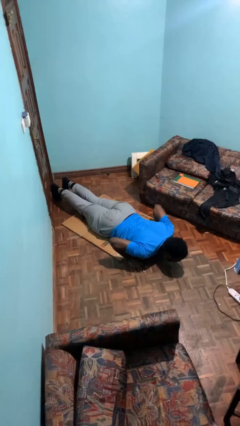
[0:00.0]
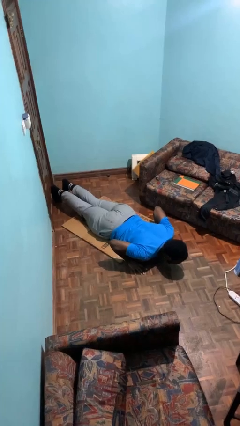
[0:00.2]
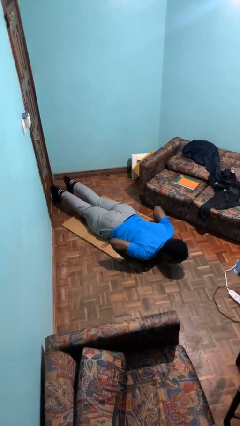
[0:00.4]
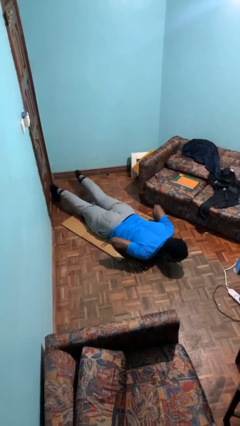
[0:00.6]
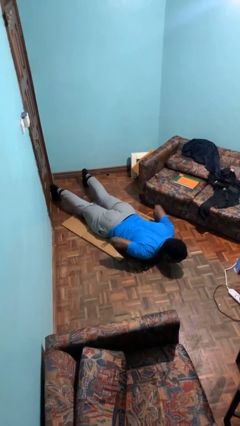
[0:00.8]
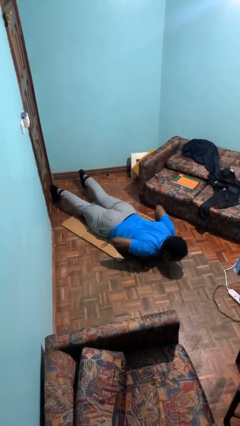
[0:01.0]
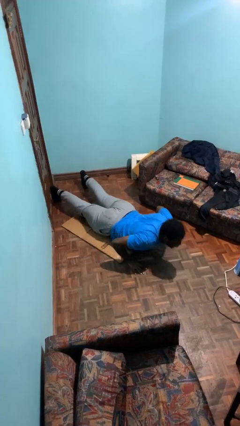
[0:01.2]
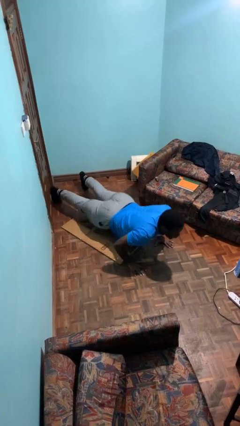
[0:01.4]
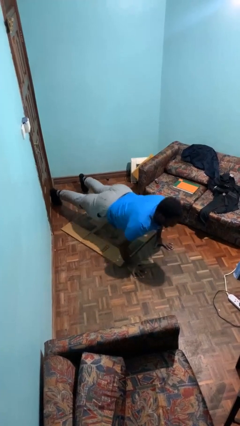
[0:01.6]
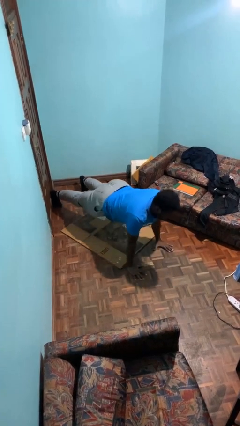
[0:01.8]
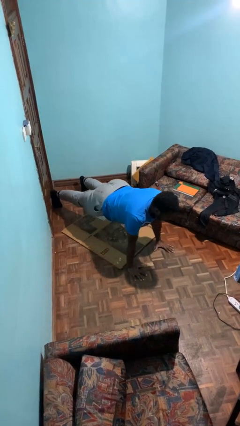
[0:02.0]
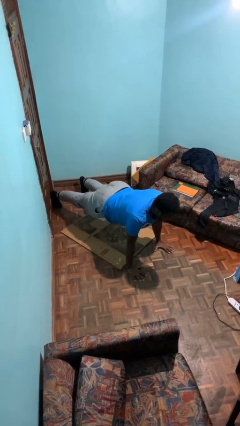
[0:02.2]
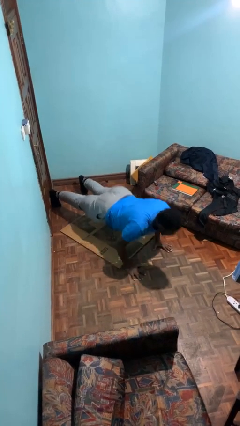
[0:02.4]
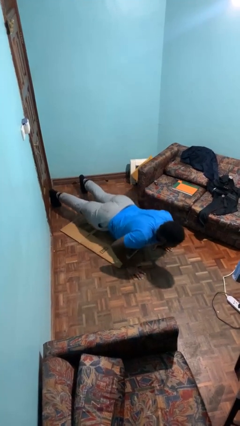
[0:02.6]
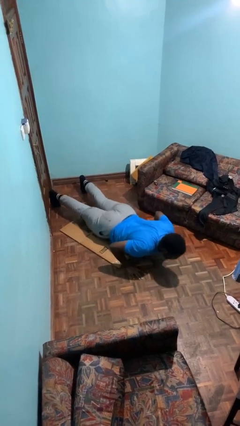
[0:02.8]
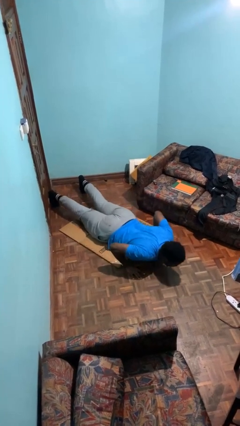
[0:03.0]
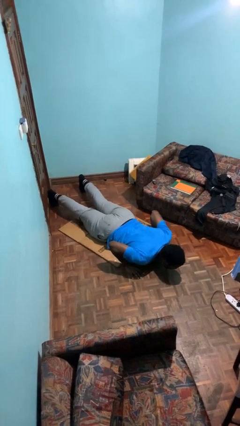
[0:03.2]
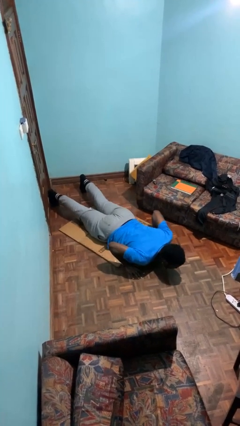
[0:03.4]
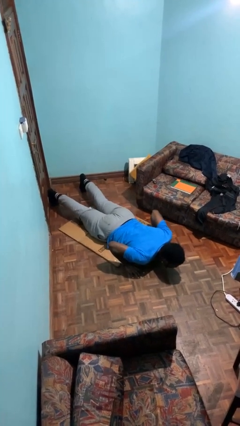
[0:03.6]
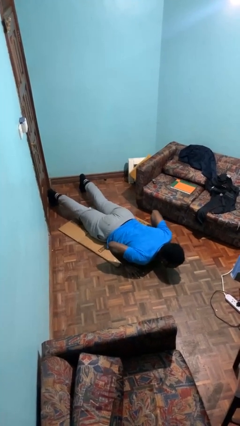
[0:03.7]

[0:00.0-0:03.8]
person exercises with pushup

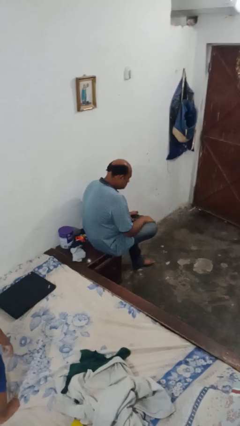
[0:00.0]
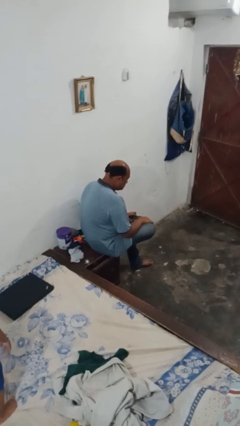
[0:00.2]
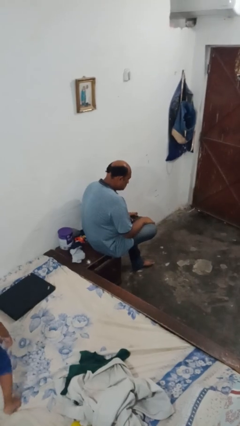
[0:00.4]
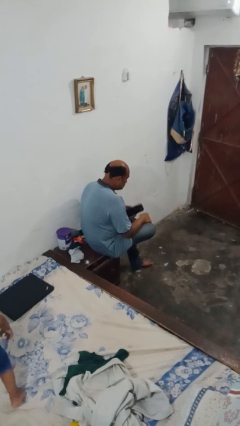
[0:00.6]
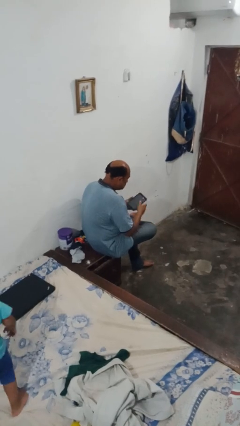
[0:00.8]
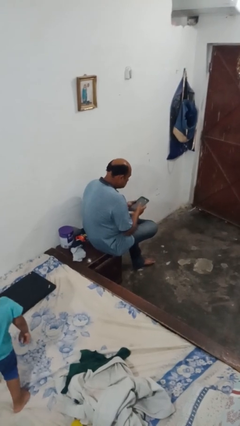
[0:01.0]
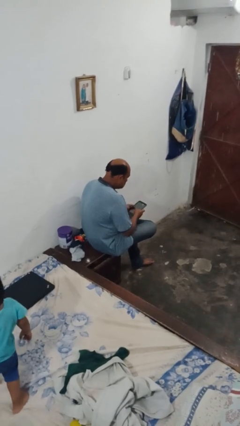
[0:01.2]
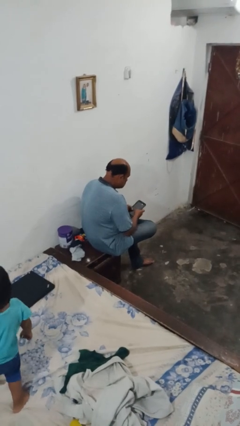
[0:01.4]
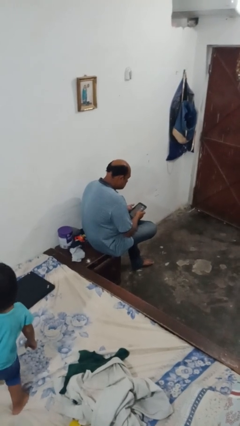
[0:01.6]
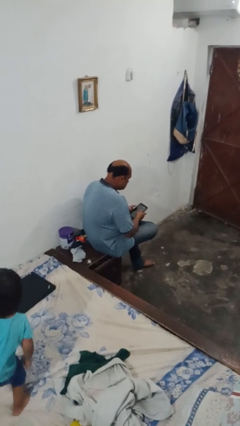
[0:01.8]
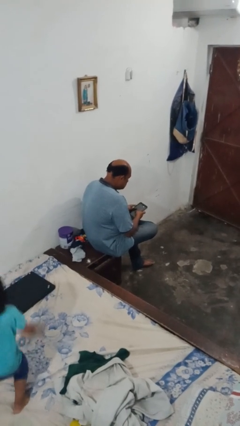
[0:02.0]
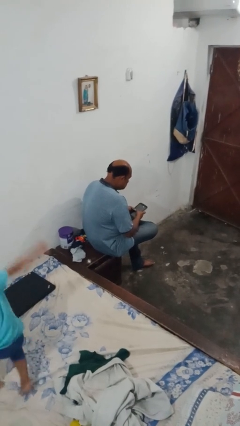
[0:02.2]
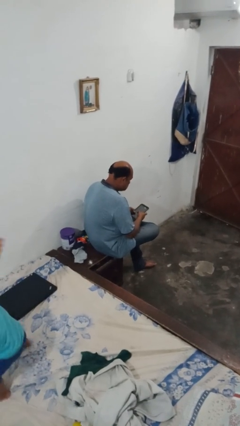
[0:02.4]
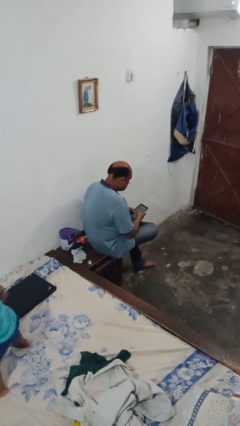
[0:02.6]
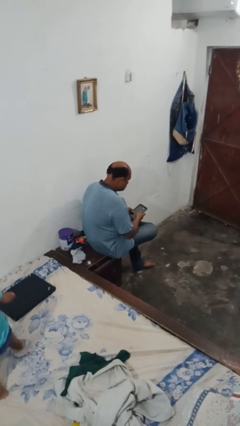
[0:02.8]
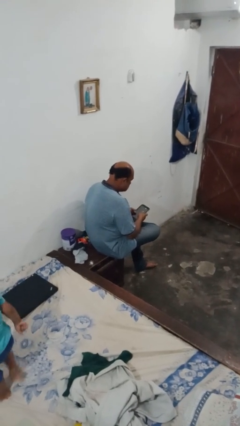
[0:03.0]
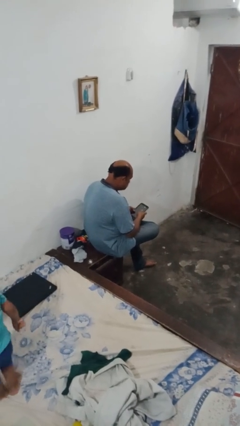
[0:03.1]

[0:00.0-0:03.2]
person interacts with tablet

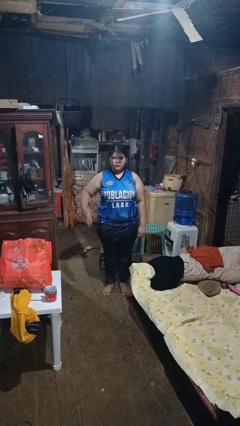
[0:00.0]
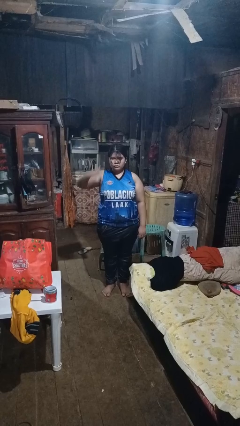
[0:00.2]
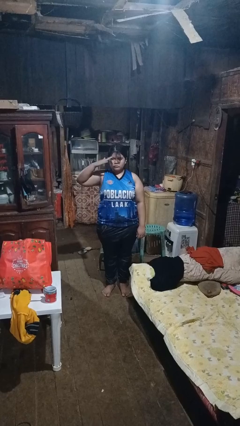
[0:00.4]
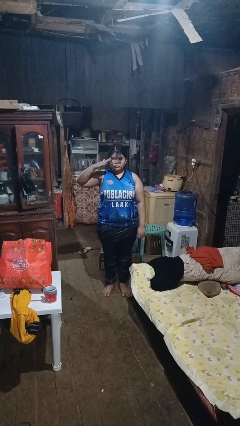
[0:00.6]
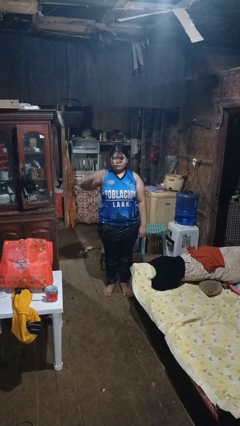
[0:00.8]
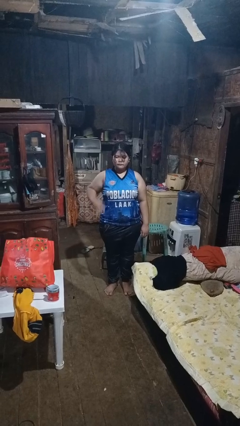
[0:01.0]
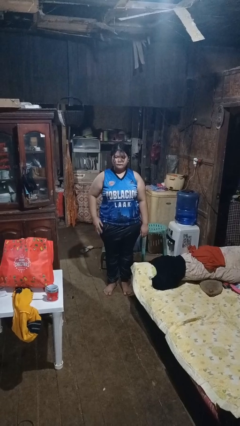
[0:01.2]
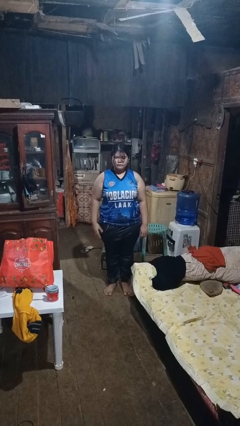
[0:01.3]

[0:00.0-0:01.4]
person salutes

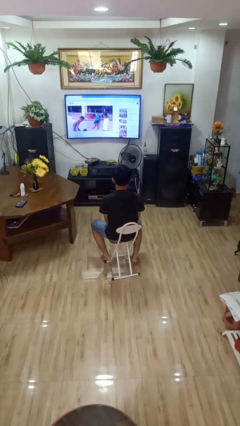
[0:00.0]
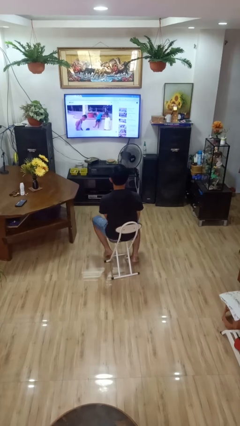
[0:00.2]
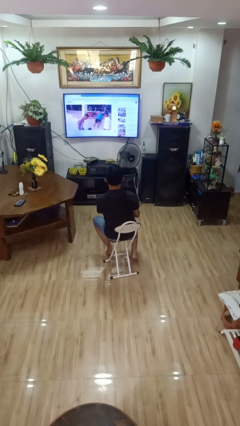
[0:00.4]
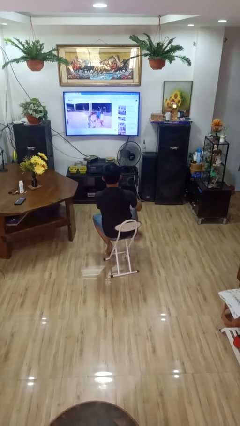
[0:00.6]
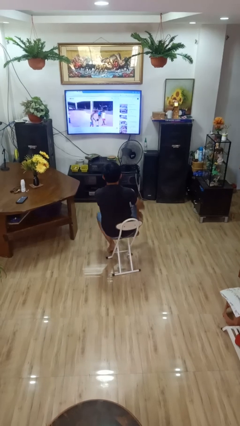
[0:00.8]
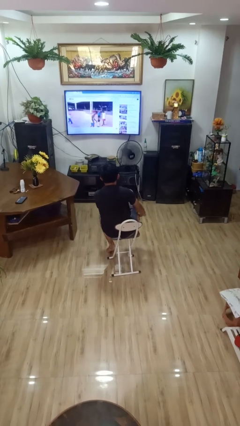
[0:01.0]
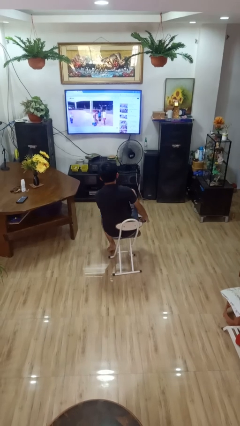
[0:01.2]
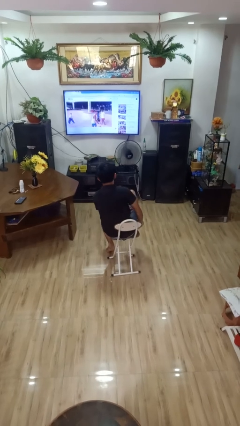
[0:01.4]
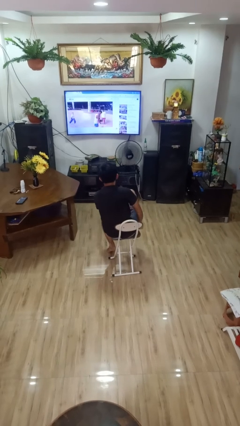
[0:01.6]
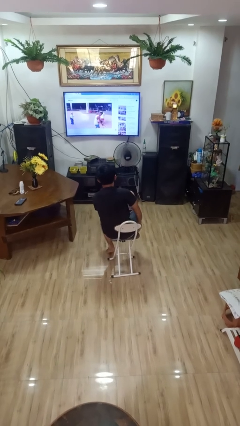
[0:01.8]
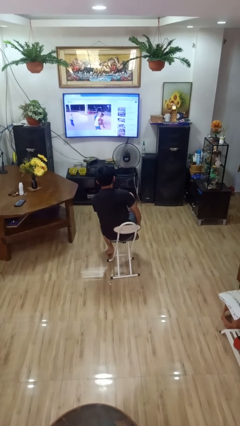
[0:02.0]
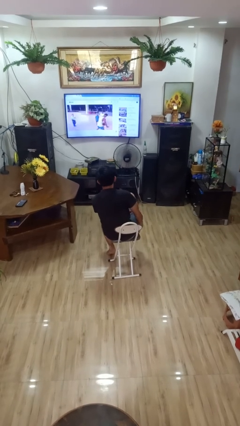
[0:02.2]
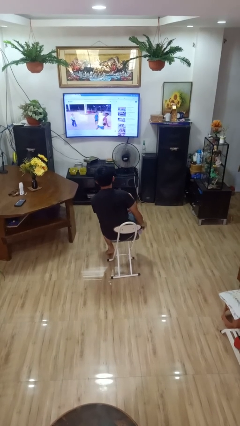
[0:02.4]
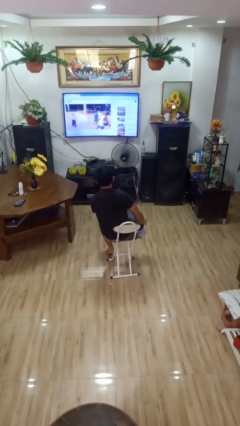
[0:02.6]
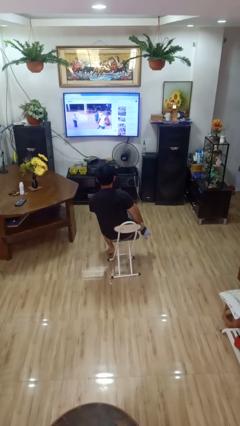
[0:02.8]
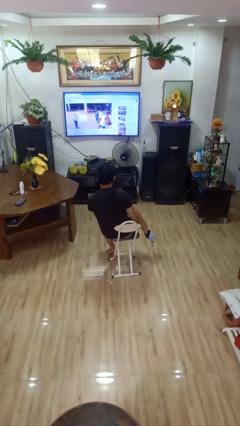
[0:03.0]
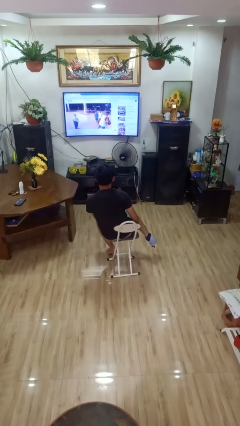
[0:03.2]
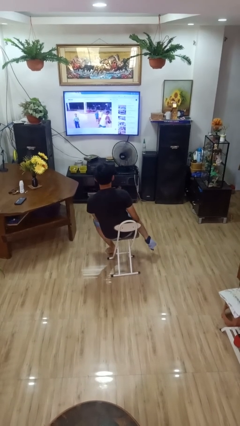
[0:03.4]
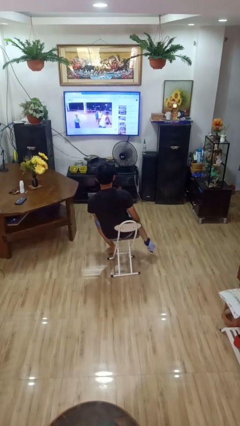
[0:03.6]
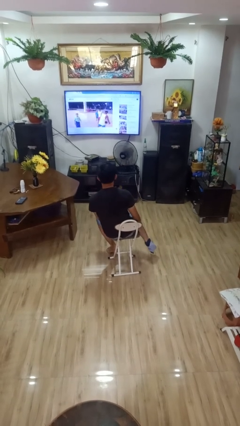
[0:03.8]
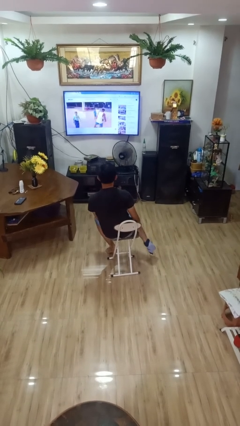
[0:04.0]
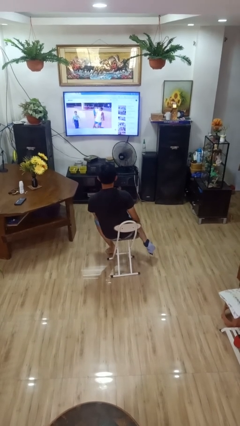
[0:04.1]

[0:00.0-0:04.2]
person puts on socks

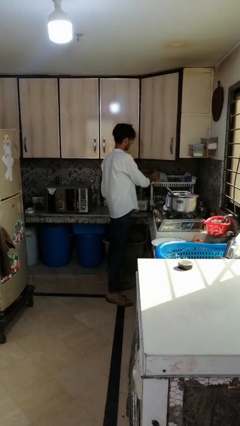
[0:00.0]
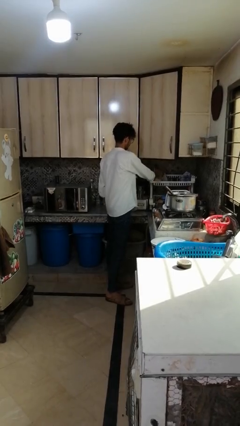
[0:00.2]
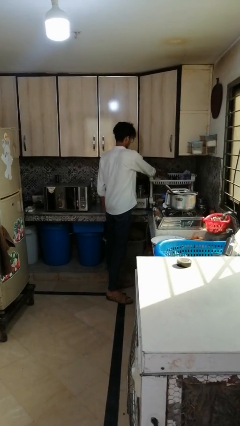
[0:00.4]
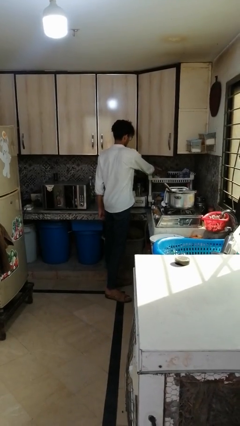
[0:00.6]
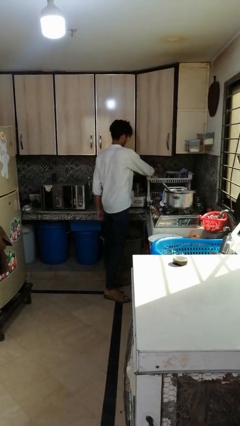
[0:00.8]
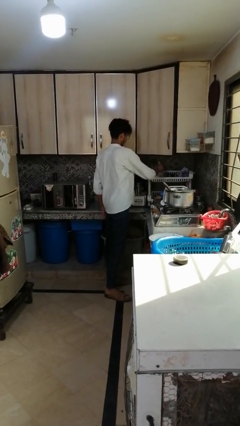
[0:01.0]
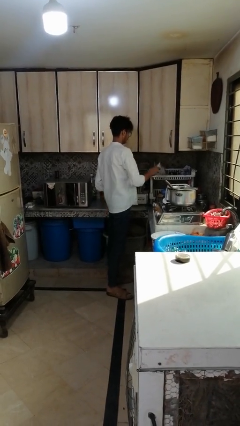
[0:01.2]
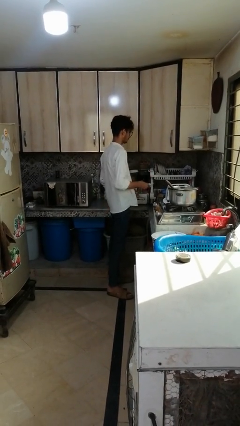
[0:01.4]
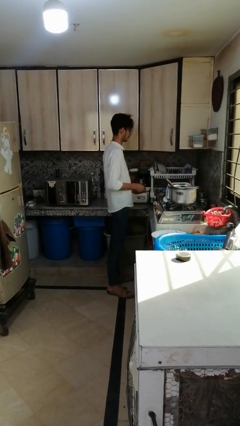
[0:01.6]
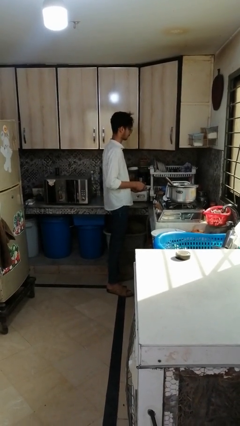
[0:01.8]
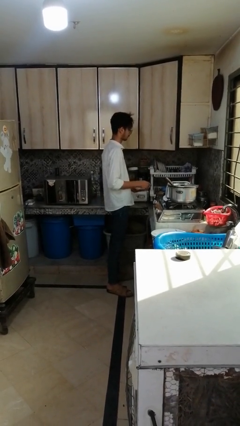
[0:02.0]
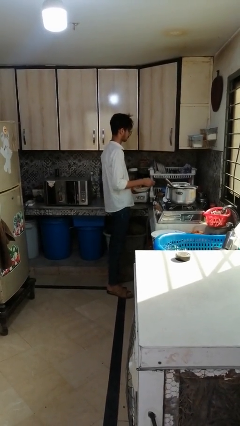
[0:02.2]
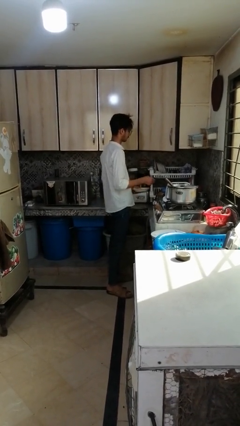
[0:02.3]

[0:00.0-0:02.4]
person unloads dishwasher

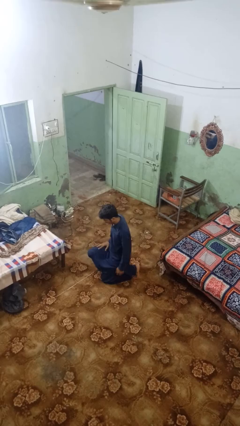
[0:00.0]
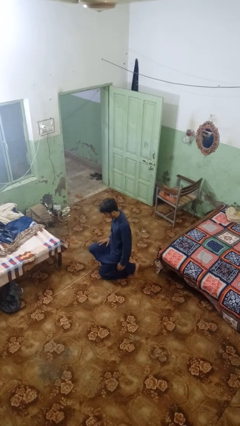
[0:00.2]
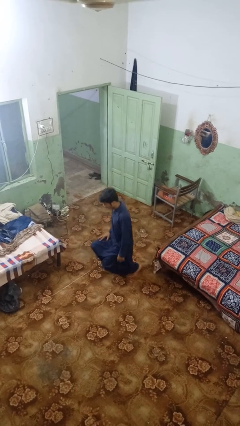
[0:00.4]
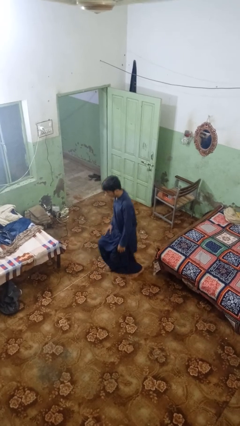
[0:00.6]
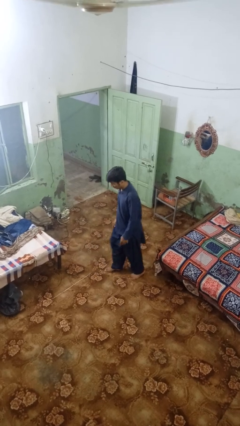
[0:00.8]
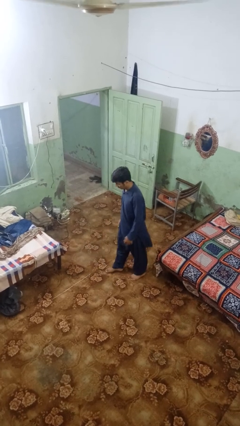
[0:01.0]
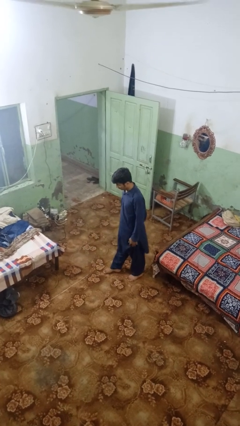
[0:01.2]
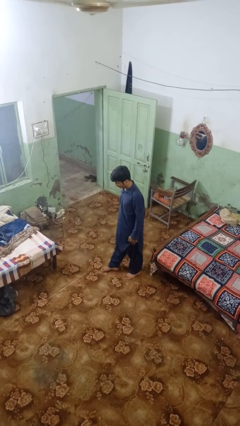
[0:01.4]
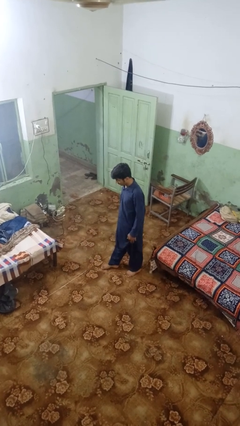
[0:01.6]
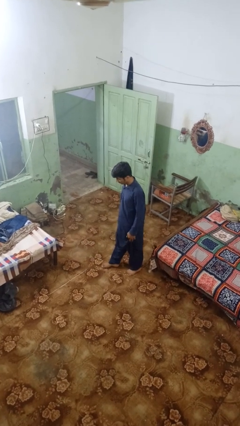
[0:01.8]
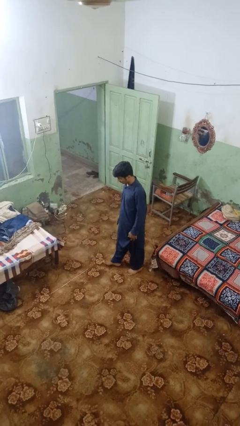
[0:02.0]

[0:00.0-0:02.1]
person stands up from floor

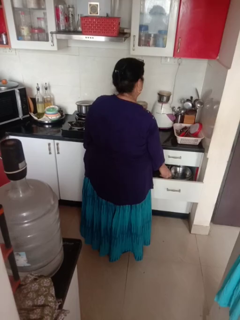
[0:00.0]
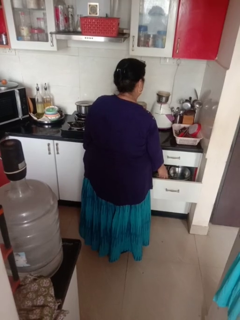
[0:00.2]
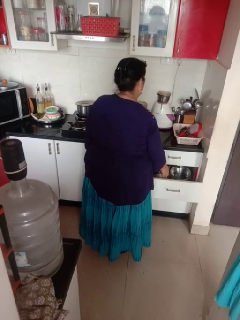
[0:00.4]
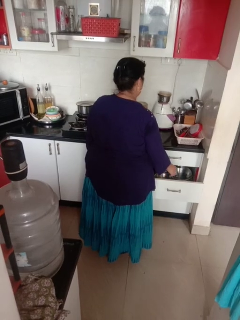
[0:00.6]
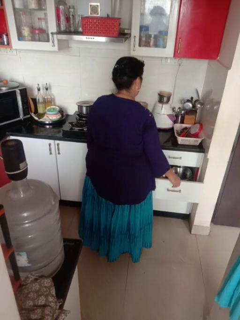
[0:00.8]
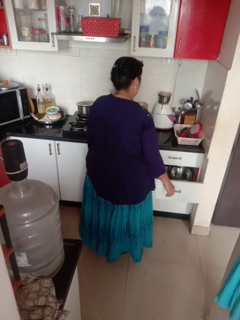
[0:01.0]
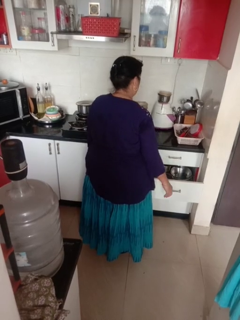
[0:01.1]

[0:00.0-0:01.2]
person puts object into kitchen drawer
